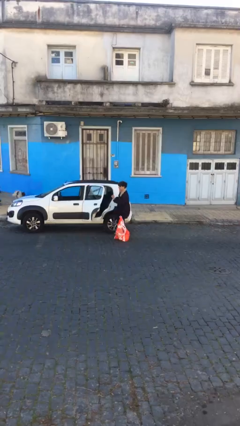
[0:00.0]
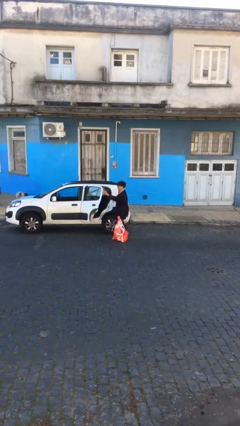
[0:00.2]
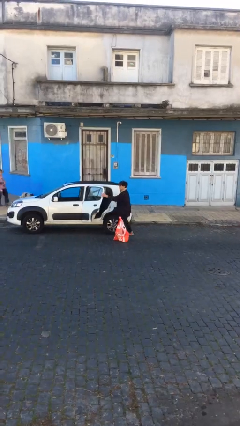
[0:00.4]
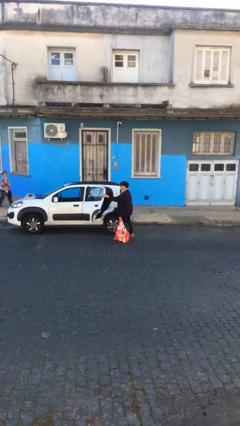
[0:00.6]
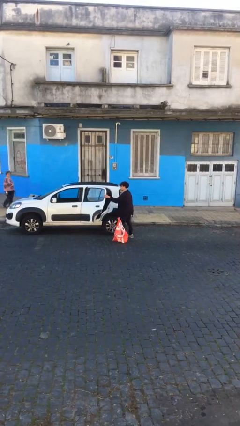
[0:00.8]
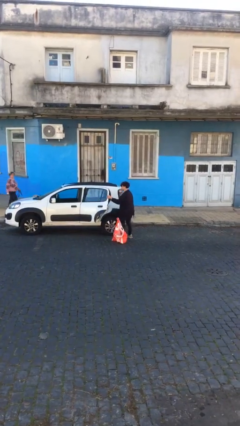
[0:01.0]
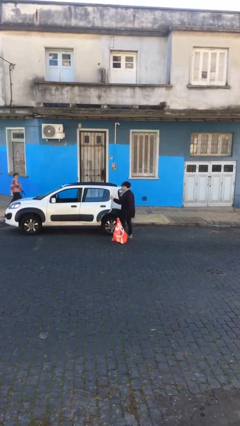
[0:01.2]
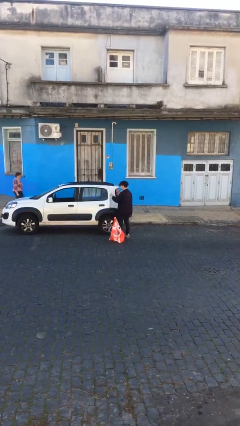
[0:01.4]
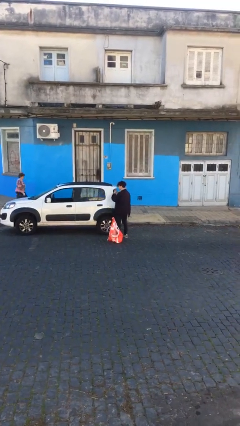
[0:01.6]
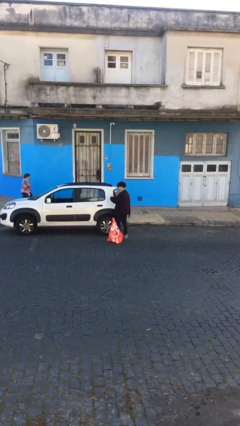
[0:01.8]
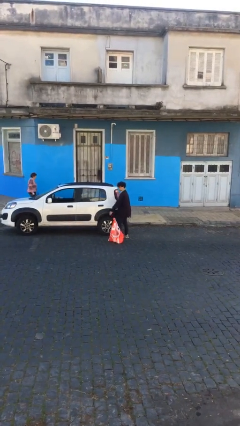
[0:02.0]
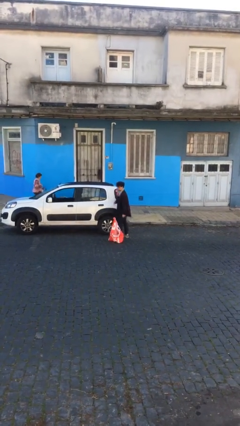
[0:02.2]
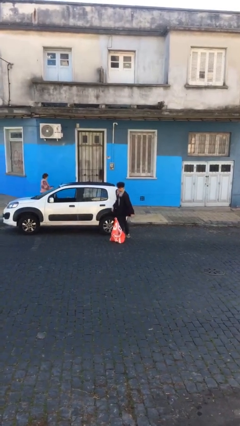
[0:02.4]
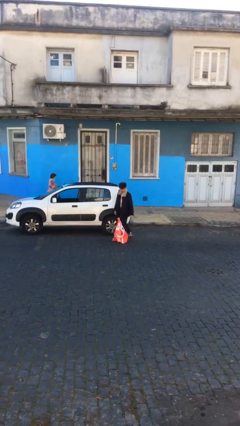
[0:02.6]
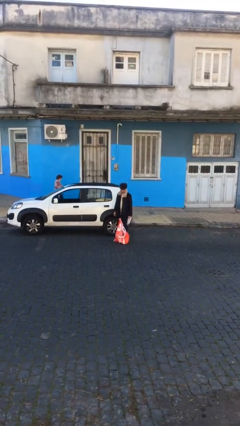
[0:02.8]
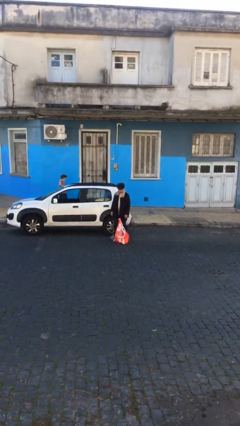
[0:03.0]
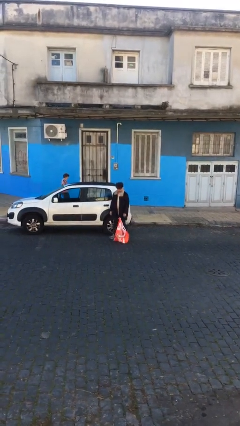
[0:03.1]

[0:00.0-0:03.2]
person closes car door

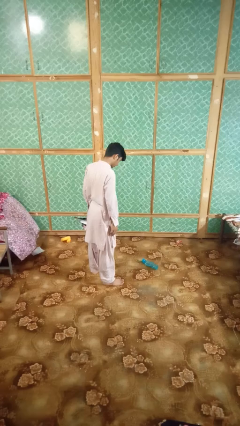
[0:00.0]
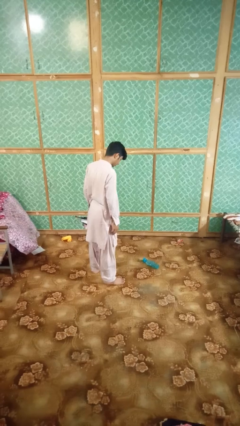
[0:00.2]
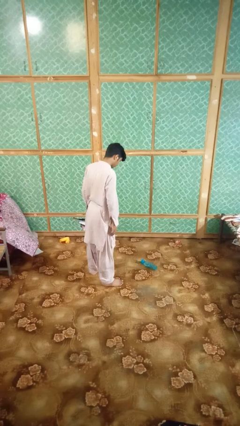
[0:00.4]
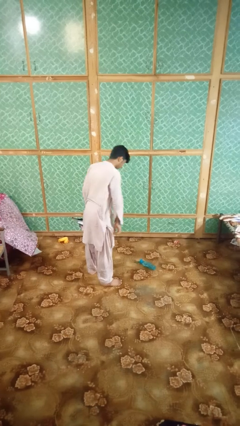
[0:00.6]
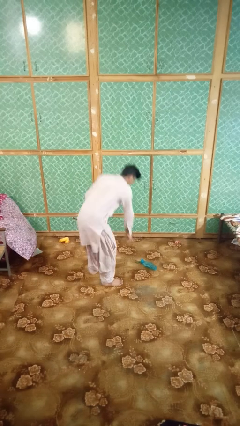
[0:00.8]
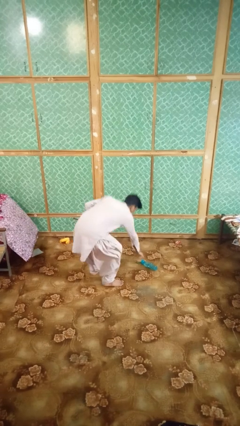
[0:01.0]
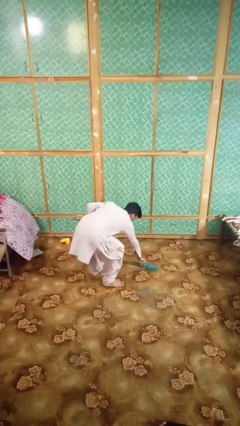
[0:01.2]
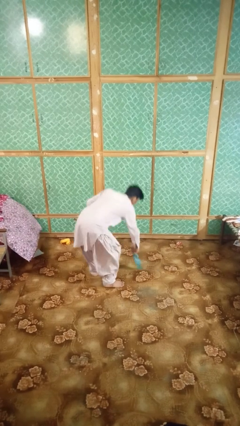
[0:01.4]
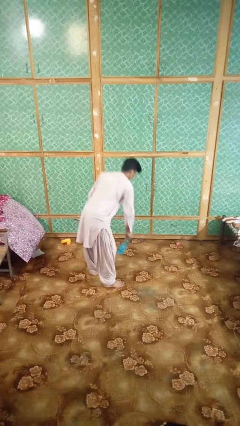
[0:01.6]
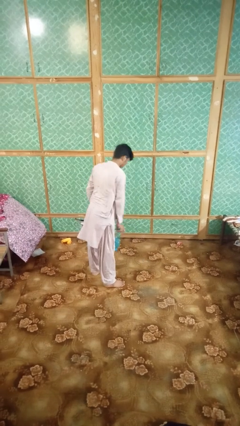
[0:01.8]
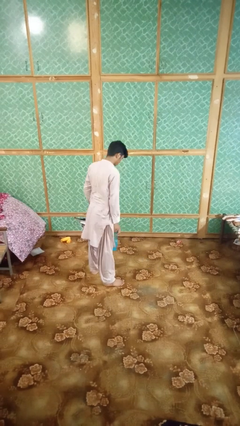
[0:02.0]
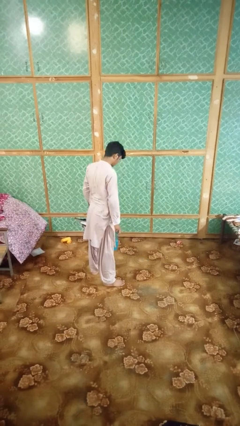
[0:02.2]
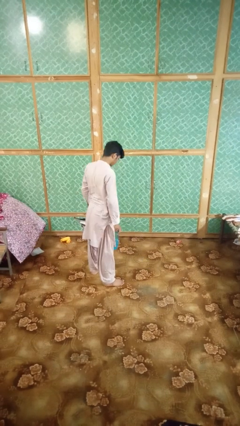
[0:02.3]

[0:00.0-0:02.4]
person picks up object from floor

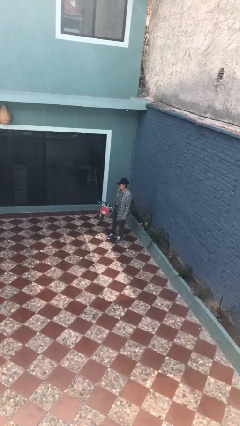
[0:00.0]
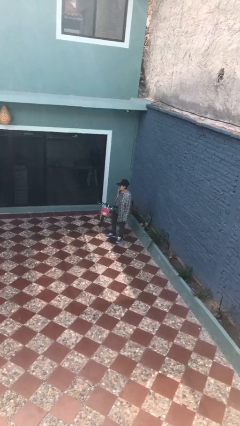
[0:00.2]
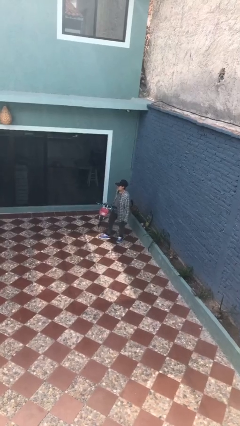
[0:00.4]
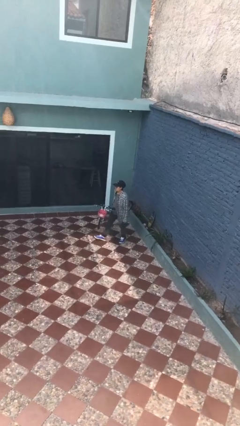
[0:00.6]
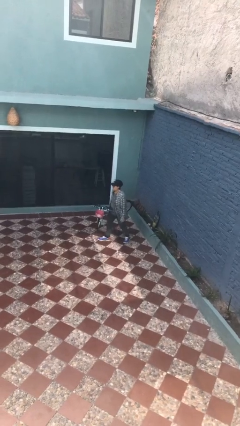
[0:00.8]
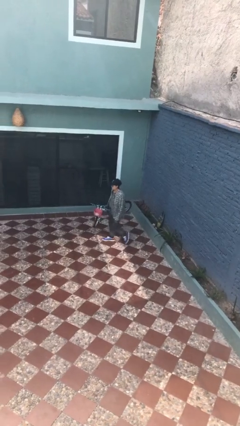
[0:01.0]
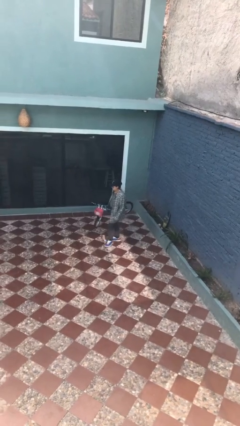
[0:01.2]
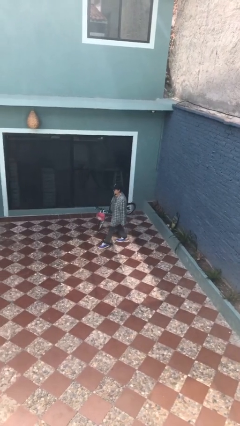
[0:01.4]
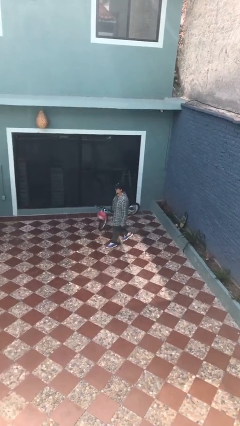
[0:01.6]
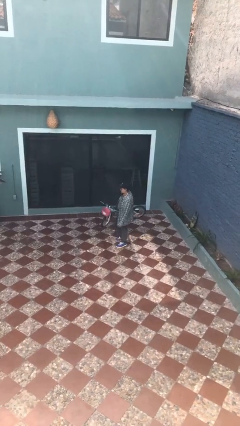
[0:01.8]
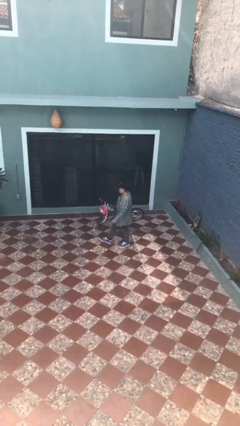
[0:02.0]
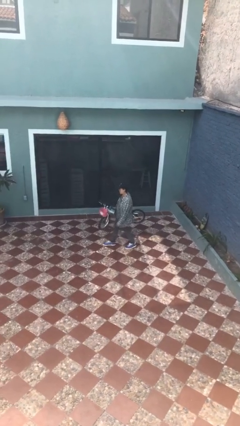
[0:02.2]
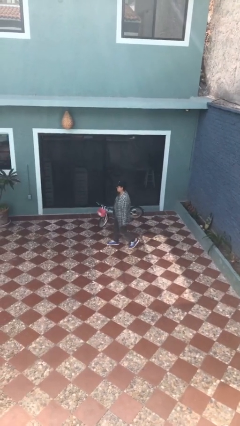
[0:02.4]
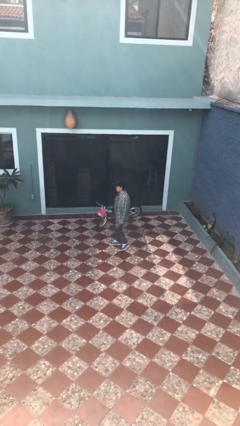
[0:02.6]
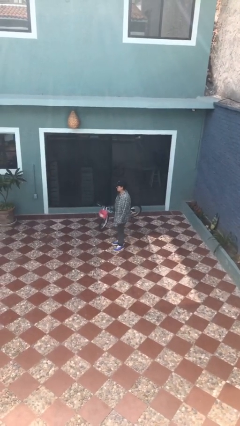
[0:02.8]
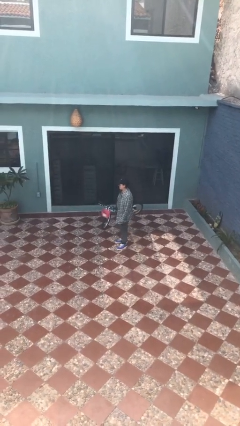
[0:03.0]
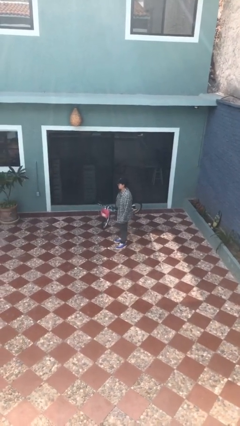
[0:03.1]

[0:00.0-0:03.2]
person carries bicycle

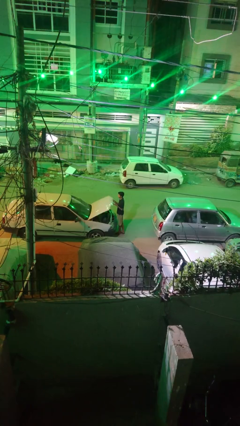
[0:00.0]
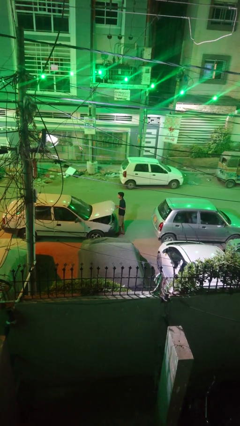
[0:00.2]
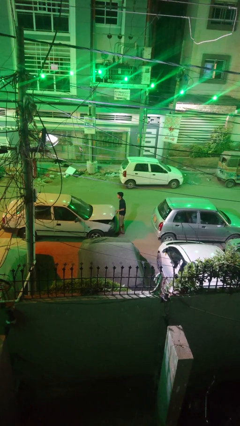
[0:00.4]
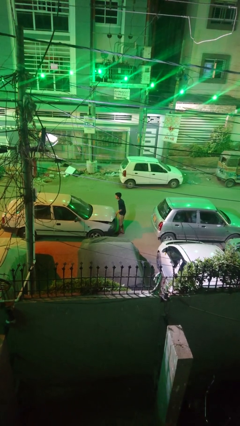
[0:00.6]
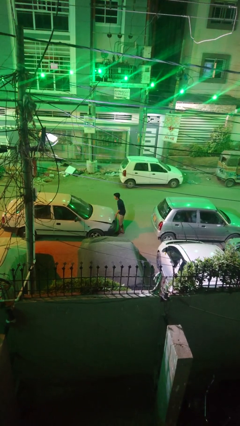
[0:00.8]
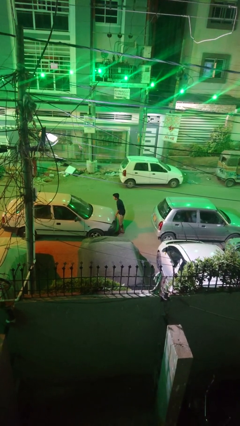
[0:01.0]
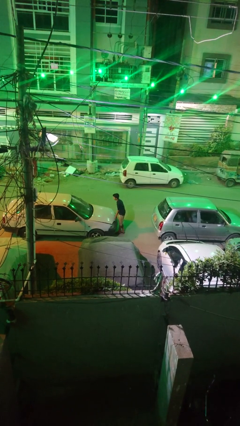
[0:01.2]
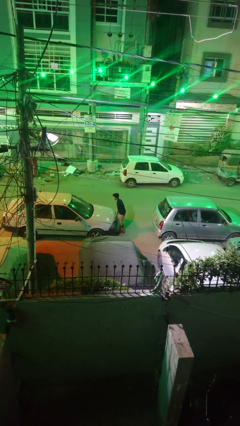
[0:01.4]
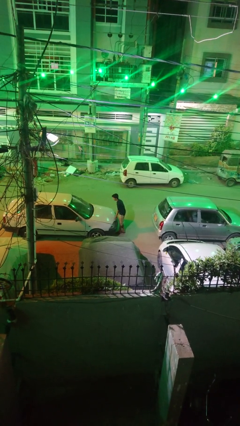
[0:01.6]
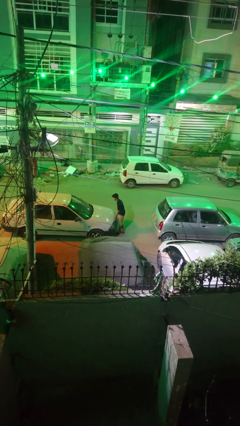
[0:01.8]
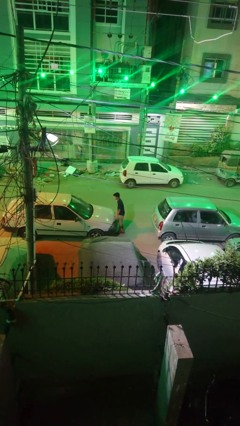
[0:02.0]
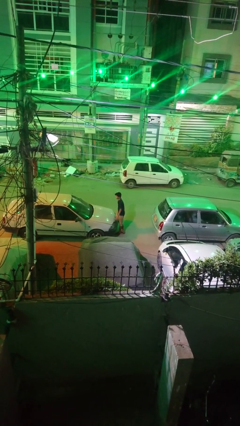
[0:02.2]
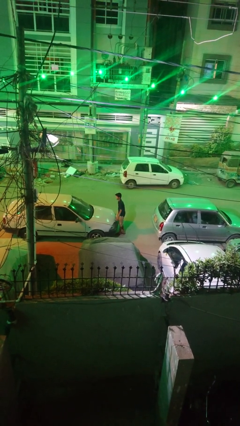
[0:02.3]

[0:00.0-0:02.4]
person closes car hood

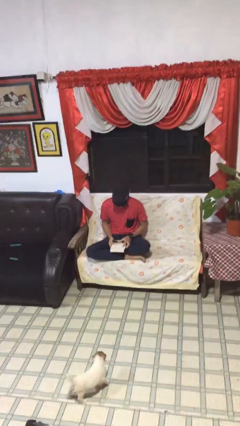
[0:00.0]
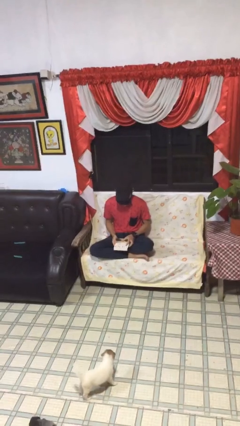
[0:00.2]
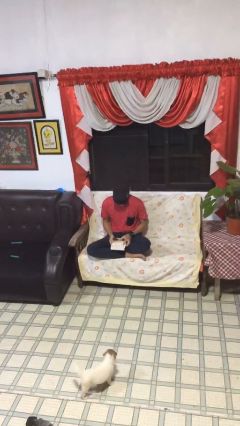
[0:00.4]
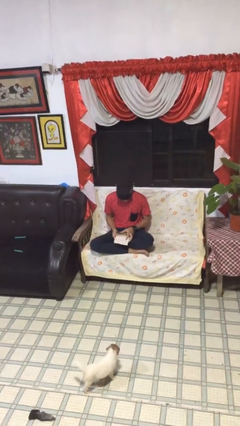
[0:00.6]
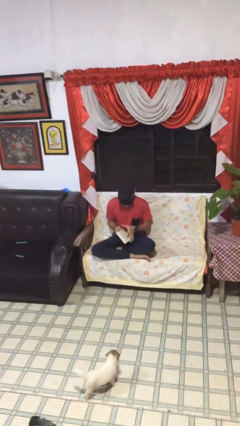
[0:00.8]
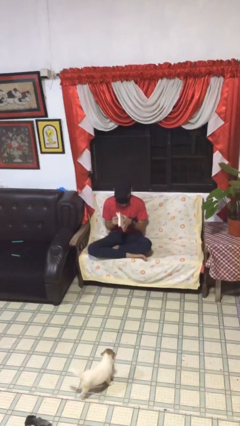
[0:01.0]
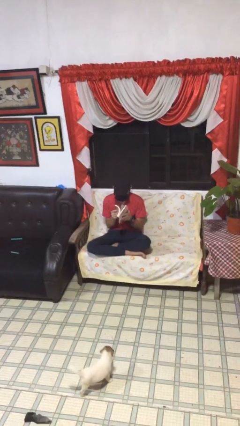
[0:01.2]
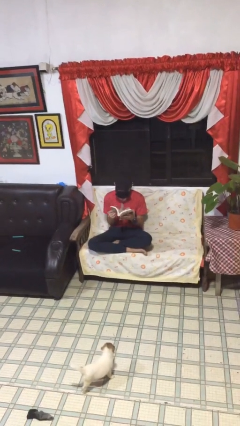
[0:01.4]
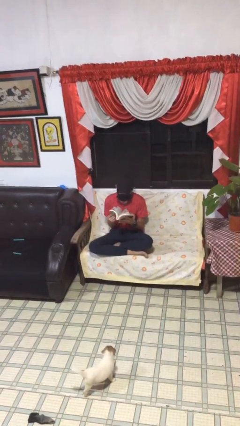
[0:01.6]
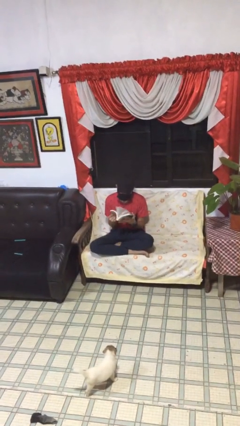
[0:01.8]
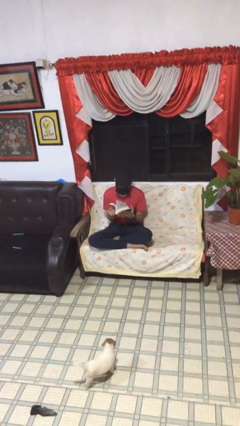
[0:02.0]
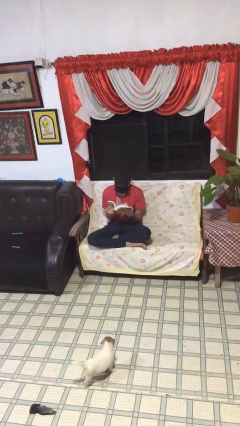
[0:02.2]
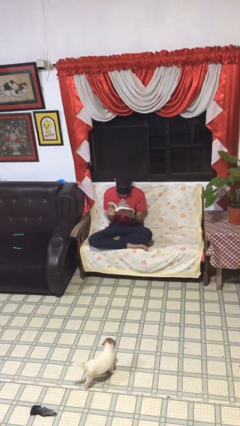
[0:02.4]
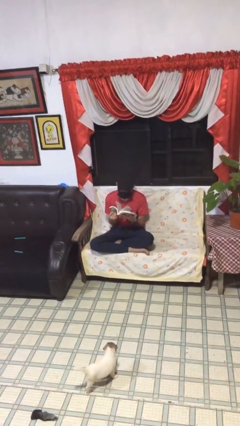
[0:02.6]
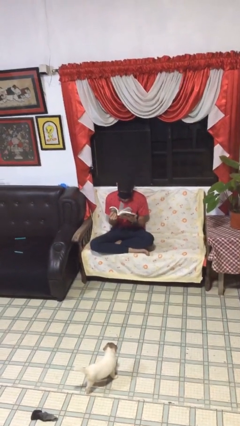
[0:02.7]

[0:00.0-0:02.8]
person reads document

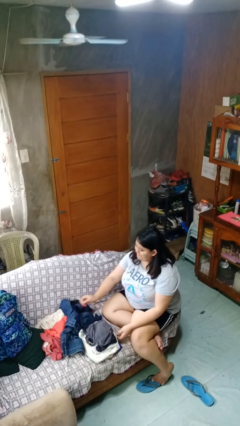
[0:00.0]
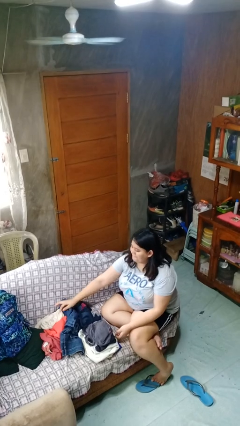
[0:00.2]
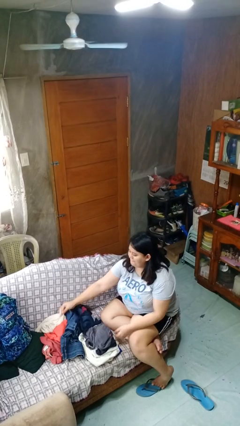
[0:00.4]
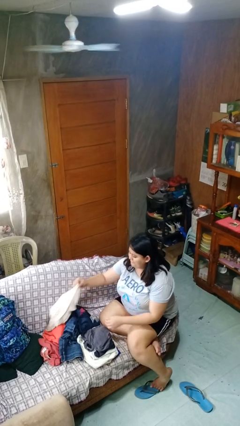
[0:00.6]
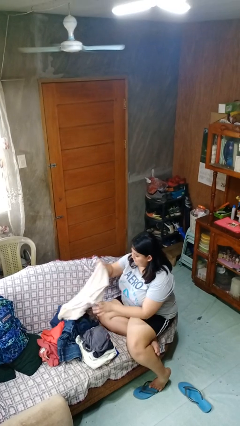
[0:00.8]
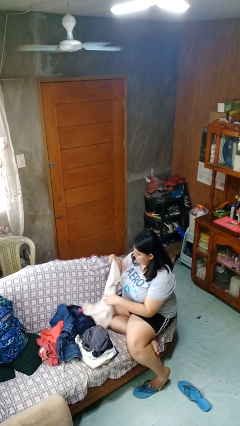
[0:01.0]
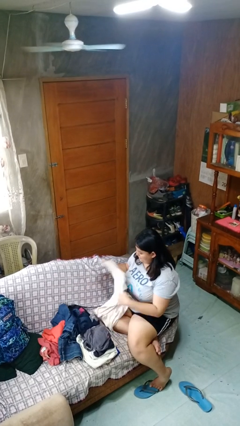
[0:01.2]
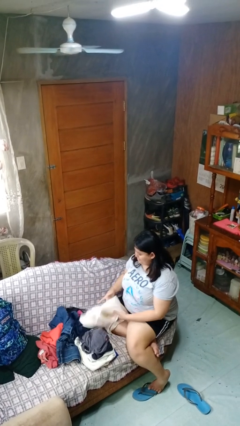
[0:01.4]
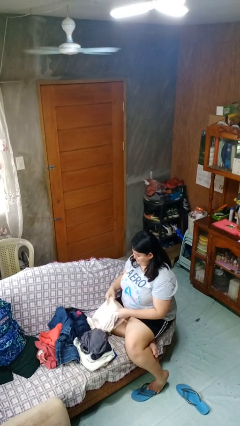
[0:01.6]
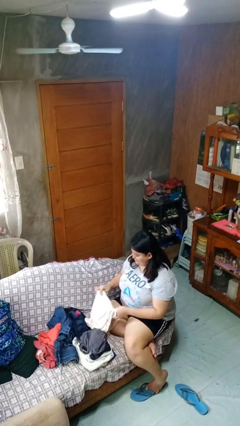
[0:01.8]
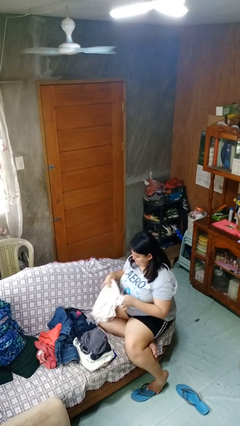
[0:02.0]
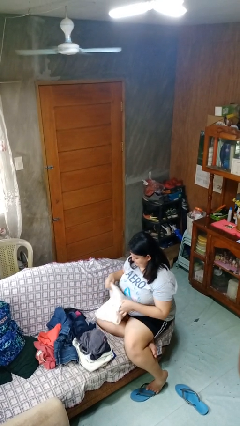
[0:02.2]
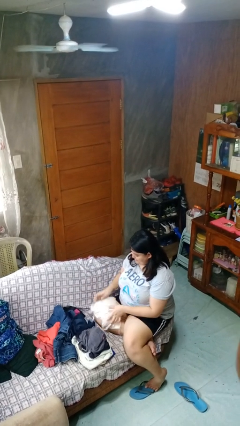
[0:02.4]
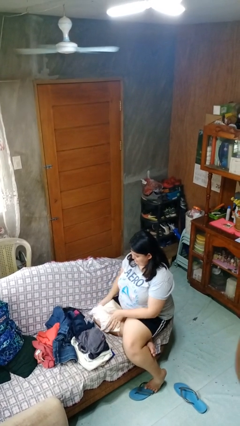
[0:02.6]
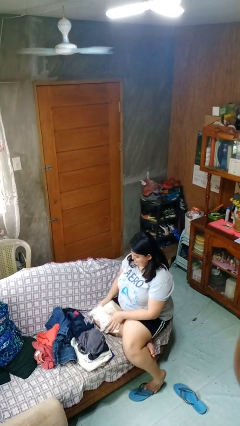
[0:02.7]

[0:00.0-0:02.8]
person folds shirt

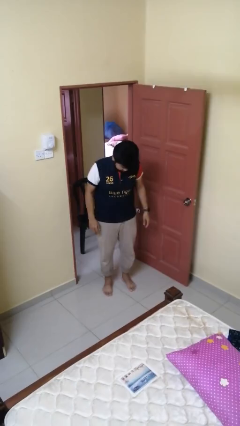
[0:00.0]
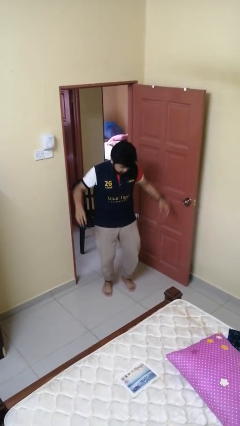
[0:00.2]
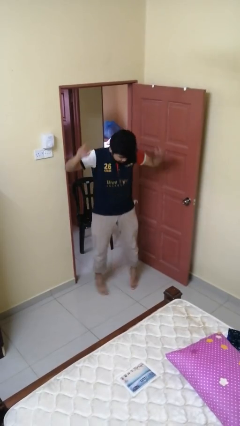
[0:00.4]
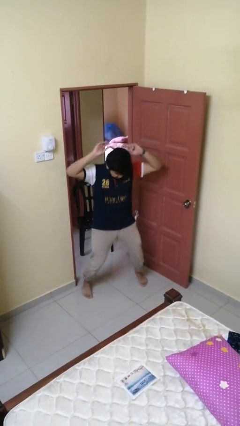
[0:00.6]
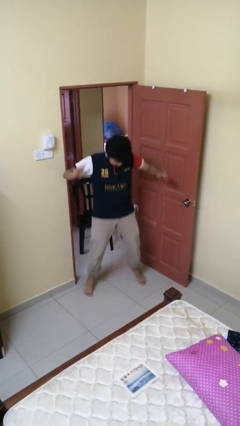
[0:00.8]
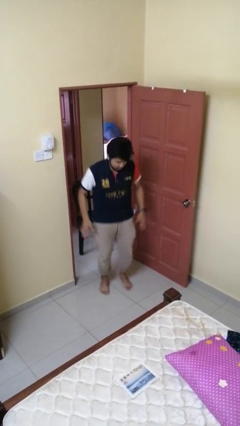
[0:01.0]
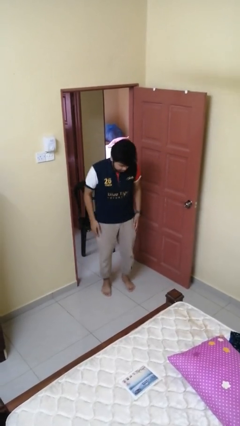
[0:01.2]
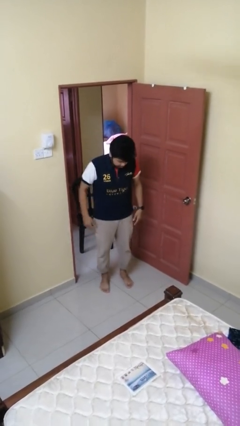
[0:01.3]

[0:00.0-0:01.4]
person exercises with jumping jacks
